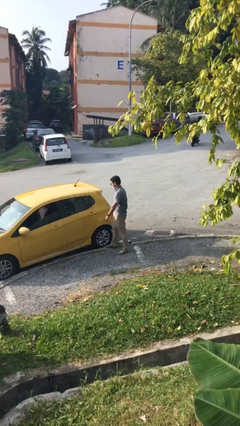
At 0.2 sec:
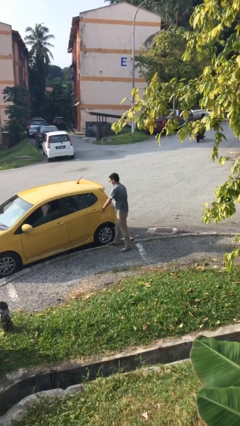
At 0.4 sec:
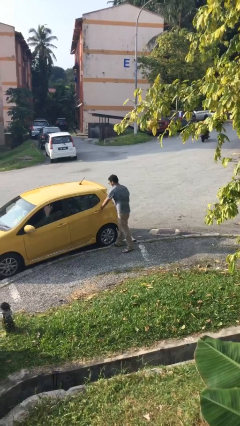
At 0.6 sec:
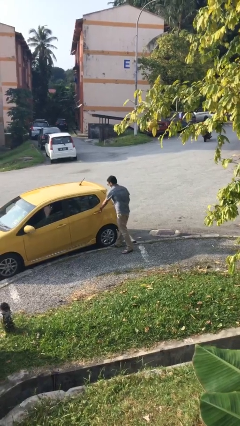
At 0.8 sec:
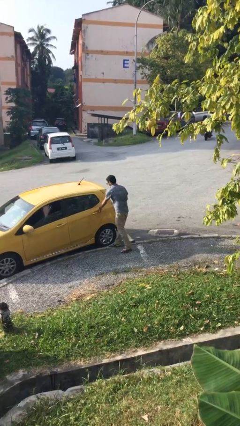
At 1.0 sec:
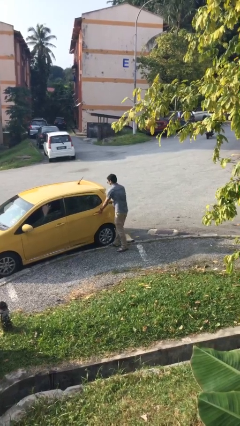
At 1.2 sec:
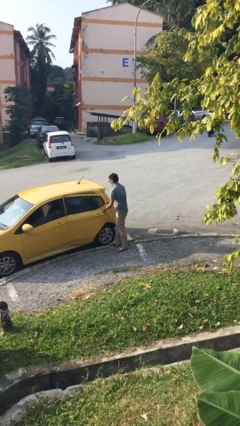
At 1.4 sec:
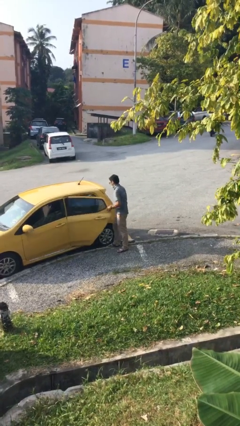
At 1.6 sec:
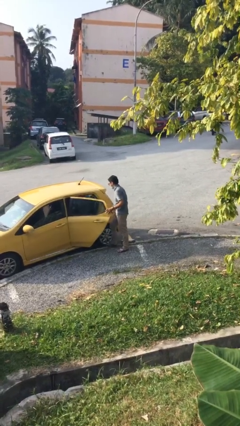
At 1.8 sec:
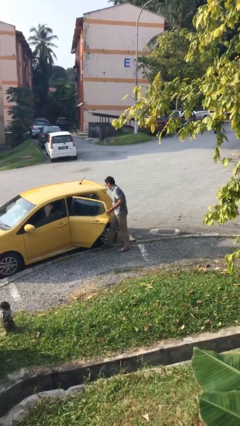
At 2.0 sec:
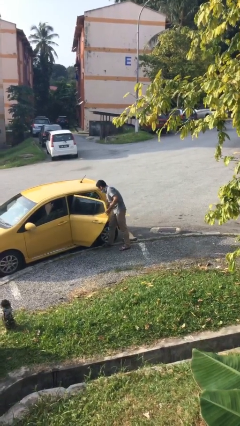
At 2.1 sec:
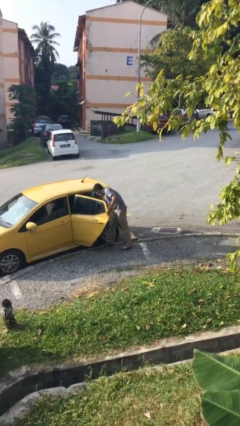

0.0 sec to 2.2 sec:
person opens car door

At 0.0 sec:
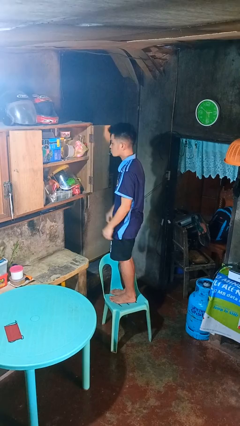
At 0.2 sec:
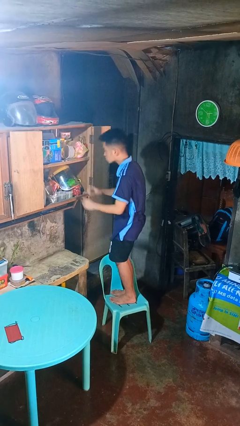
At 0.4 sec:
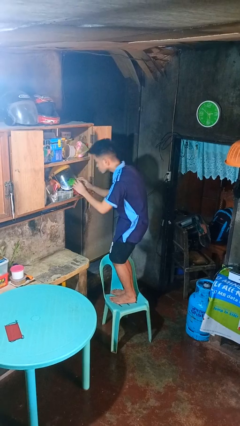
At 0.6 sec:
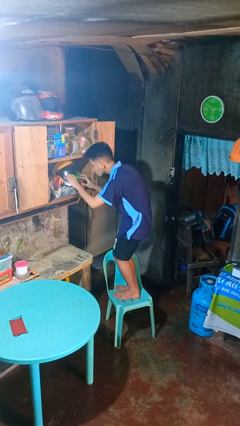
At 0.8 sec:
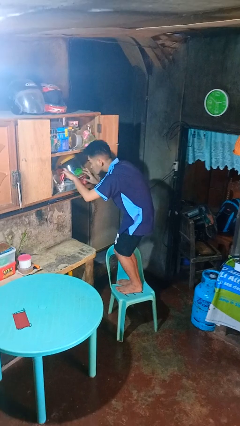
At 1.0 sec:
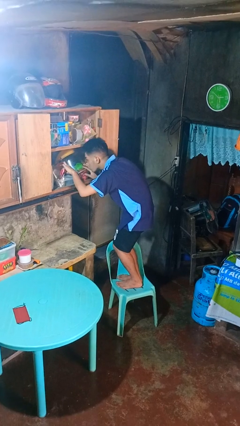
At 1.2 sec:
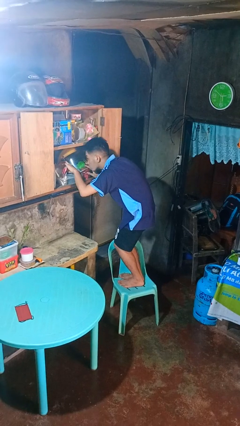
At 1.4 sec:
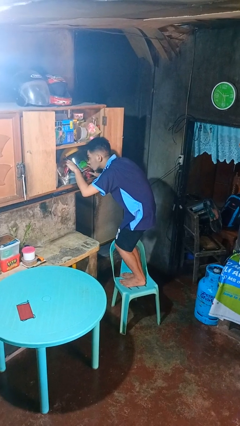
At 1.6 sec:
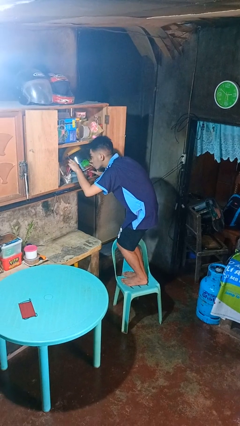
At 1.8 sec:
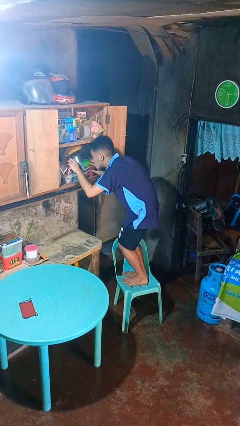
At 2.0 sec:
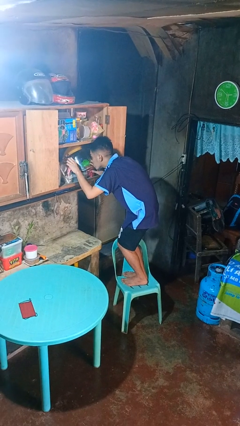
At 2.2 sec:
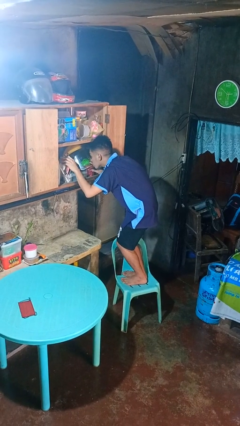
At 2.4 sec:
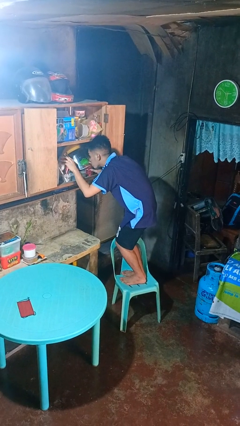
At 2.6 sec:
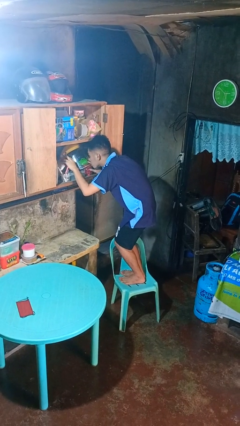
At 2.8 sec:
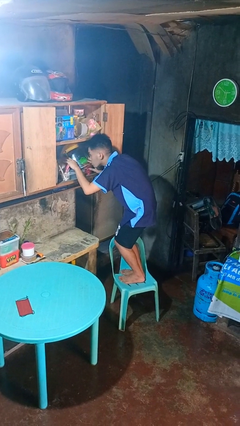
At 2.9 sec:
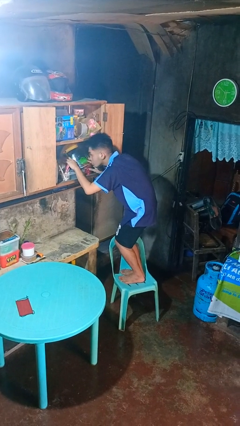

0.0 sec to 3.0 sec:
person searches in cabinet

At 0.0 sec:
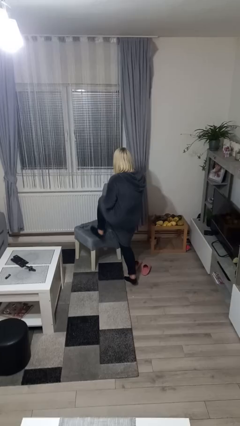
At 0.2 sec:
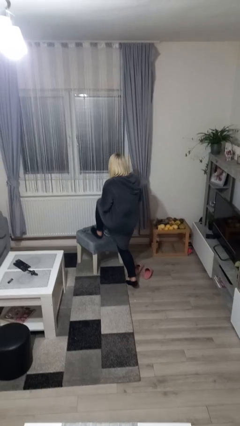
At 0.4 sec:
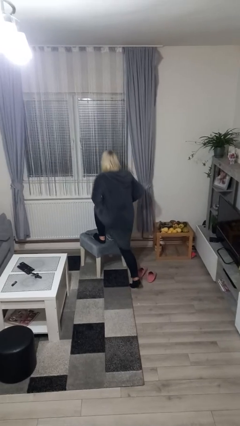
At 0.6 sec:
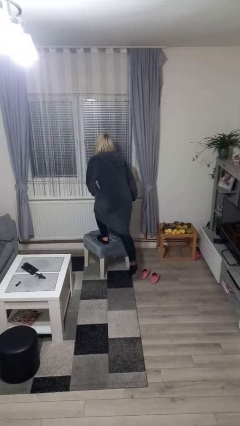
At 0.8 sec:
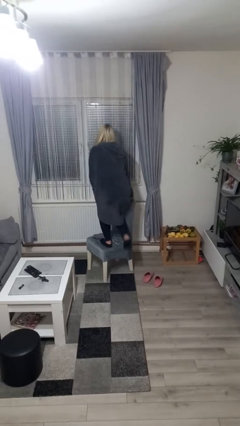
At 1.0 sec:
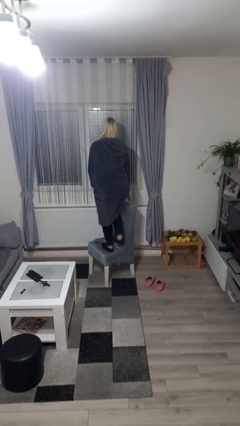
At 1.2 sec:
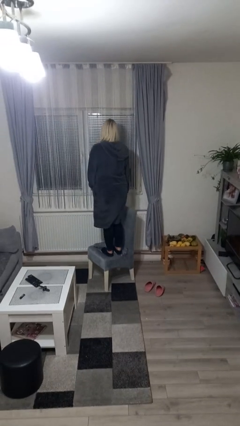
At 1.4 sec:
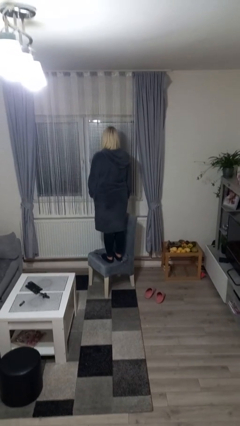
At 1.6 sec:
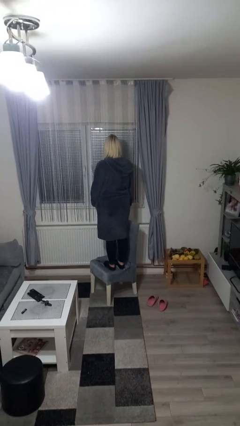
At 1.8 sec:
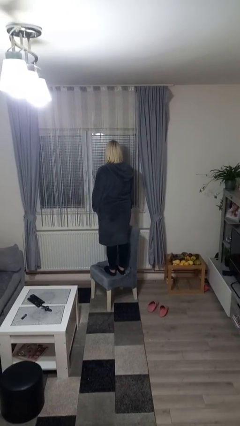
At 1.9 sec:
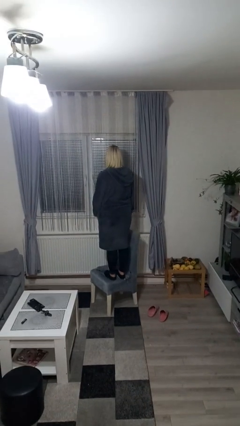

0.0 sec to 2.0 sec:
person climbs on chair

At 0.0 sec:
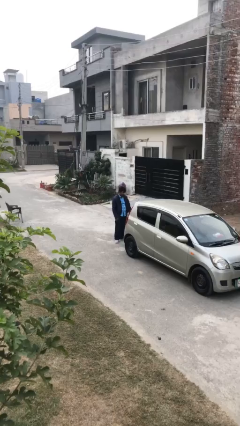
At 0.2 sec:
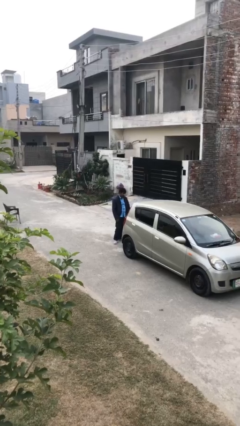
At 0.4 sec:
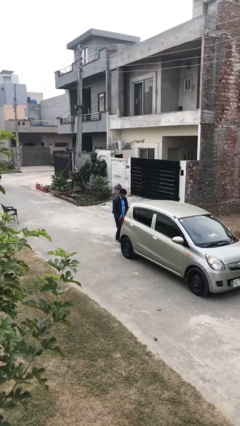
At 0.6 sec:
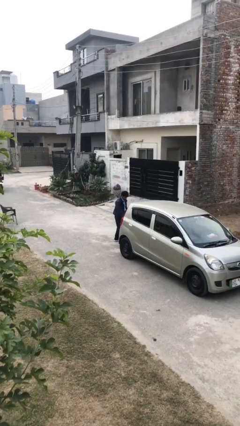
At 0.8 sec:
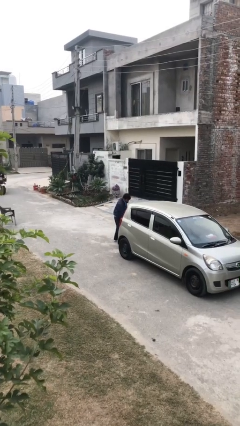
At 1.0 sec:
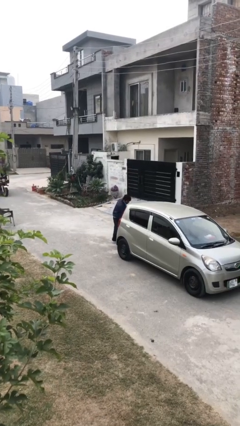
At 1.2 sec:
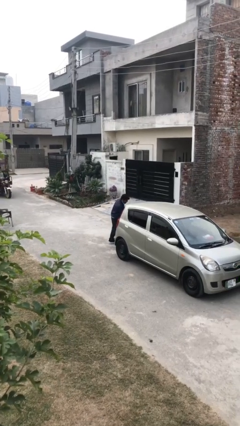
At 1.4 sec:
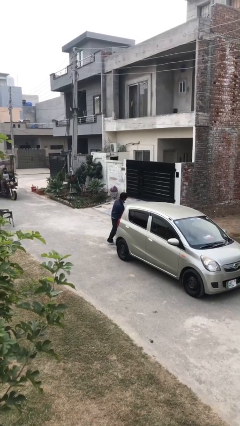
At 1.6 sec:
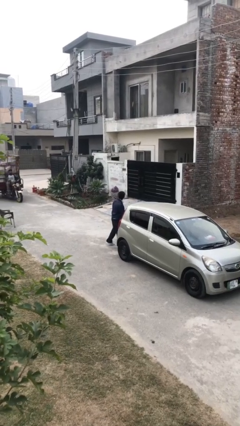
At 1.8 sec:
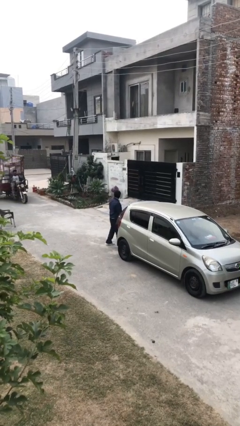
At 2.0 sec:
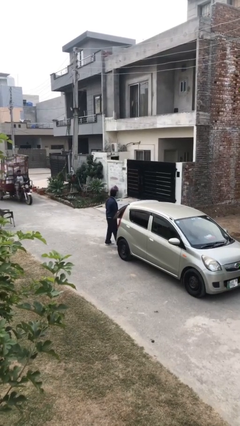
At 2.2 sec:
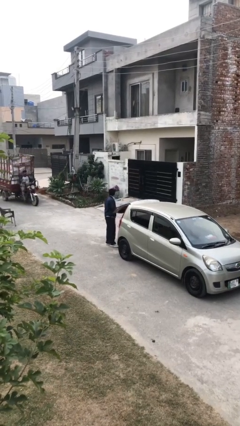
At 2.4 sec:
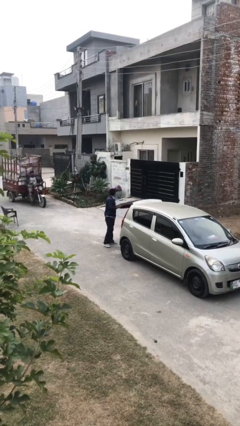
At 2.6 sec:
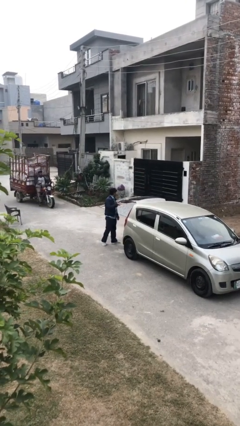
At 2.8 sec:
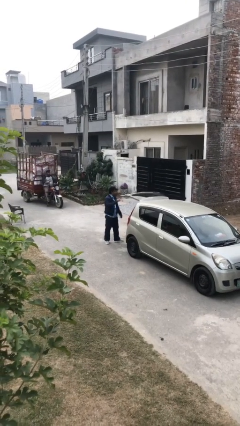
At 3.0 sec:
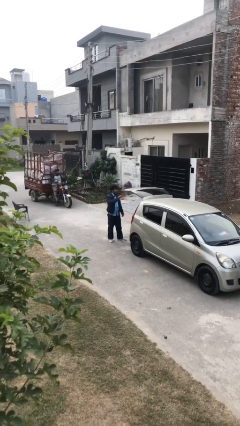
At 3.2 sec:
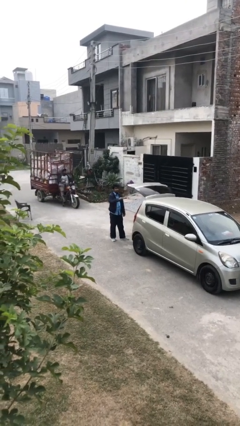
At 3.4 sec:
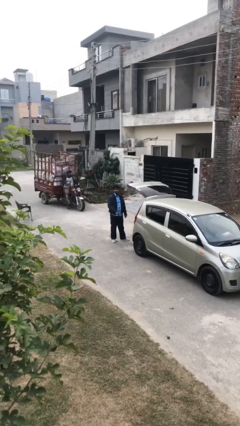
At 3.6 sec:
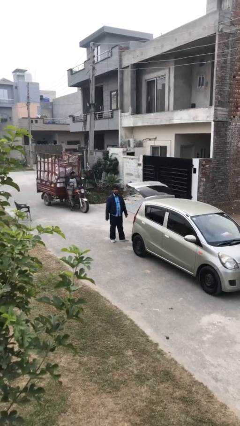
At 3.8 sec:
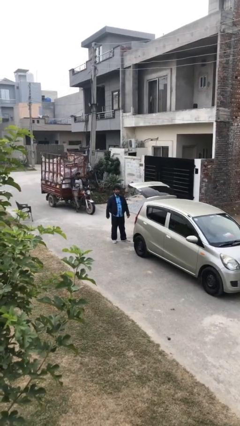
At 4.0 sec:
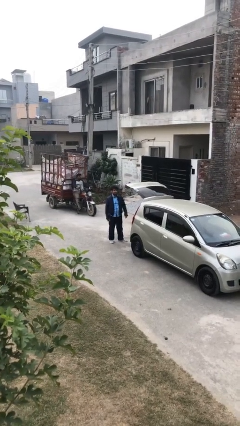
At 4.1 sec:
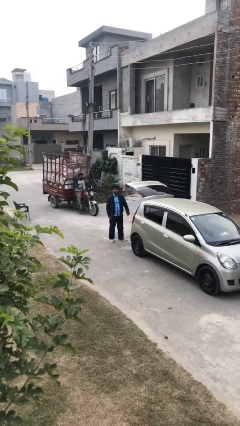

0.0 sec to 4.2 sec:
person opens car trunk

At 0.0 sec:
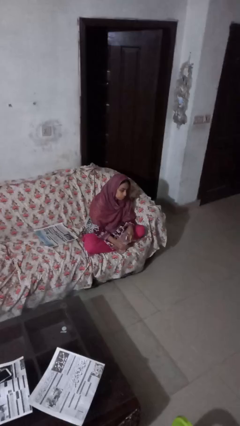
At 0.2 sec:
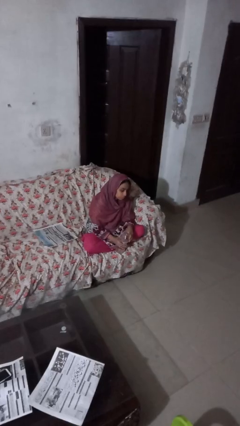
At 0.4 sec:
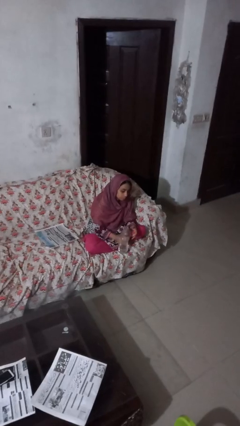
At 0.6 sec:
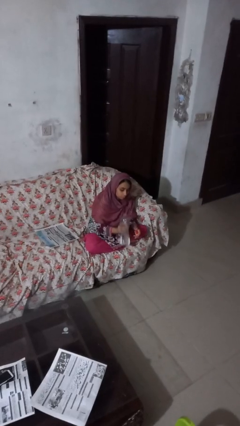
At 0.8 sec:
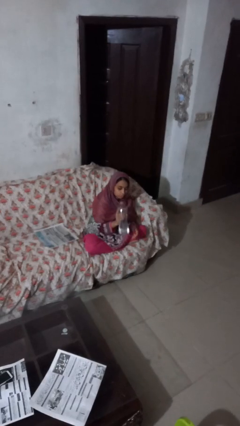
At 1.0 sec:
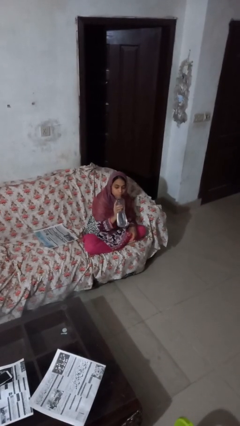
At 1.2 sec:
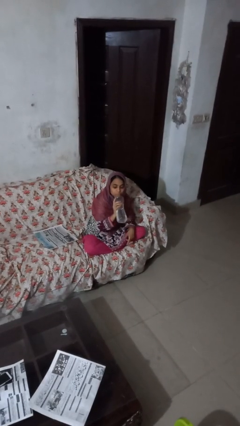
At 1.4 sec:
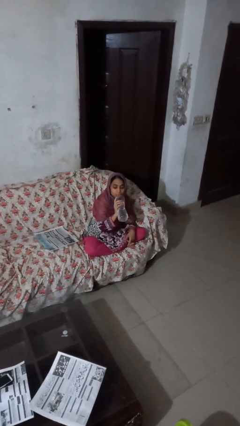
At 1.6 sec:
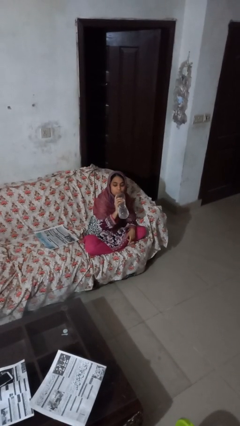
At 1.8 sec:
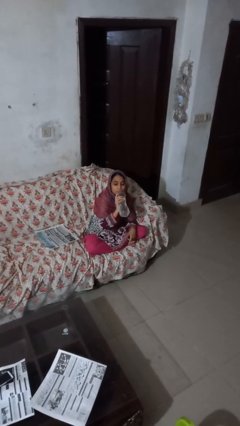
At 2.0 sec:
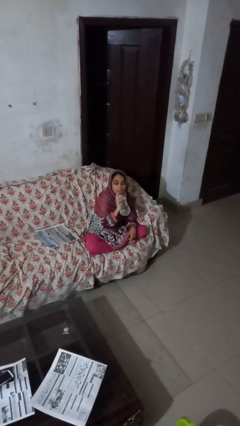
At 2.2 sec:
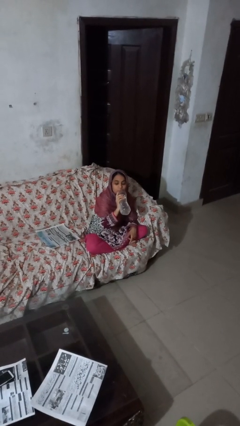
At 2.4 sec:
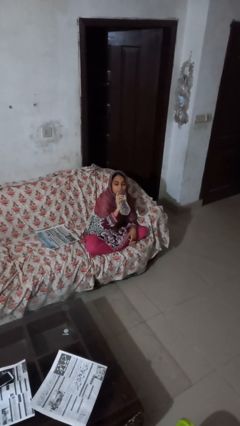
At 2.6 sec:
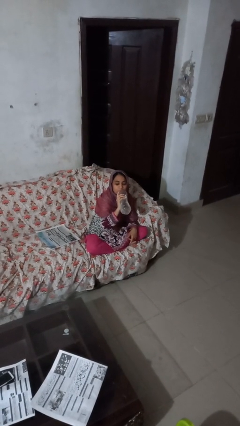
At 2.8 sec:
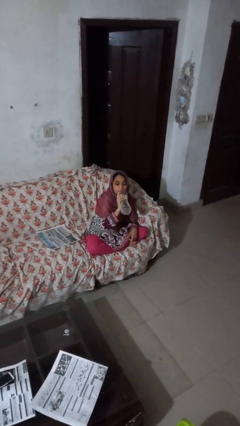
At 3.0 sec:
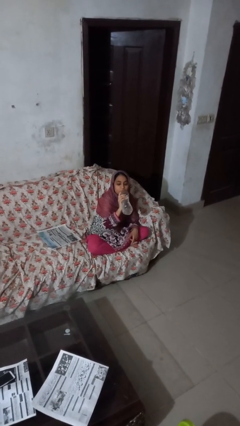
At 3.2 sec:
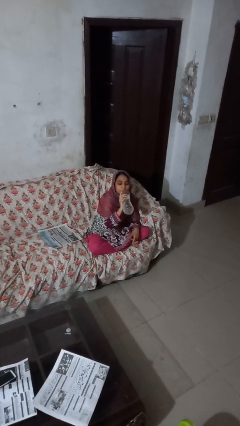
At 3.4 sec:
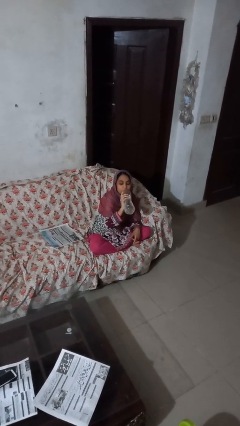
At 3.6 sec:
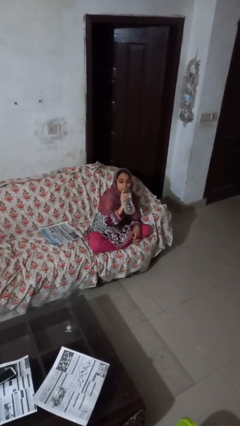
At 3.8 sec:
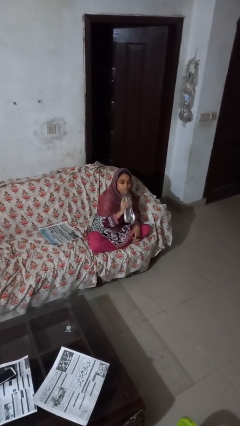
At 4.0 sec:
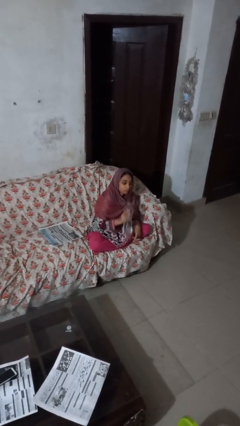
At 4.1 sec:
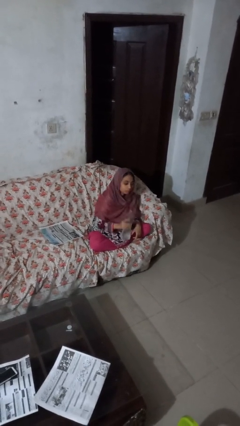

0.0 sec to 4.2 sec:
person drinks from bottle

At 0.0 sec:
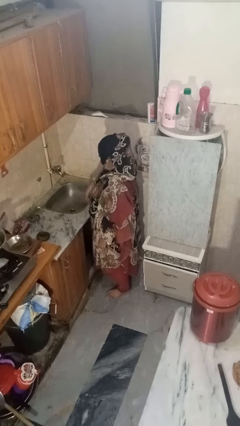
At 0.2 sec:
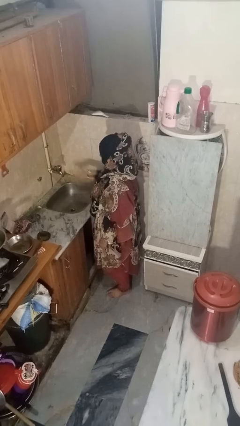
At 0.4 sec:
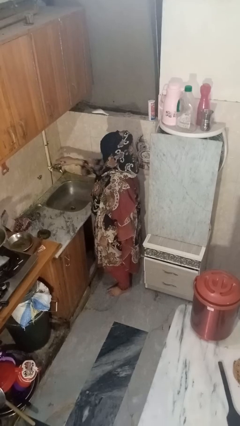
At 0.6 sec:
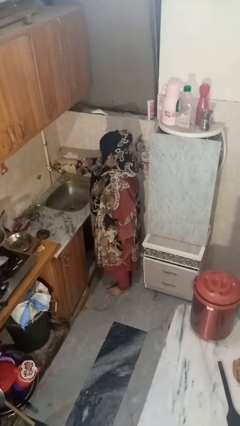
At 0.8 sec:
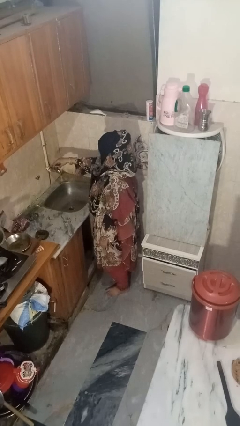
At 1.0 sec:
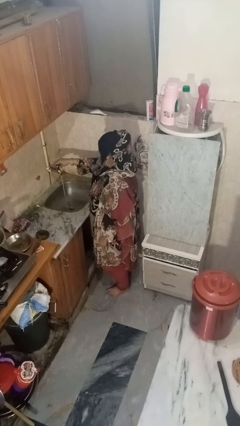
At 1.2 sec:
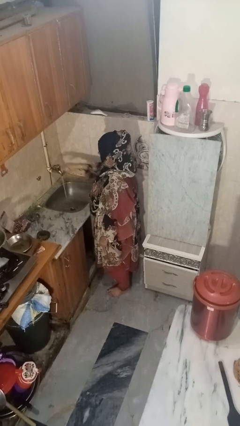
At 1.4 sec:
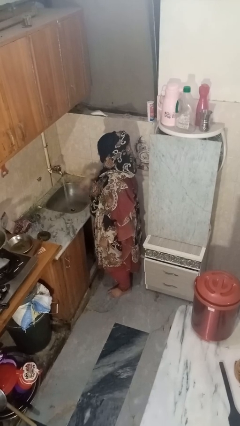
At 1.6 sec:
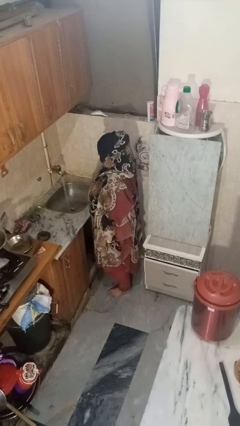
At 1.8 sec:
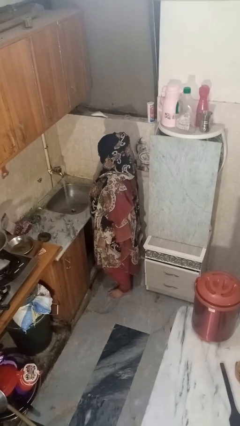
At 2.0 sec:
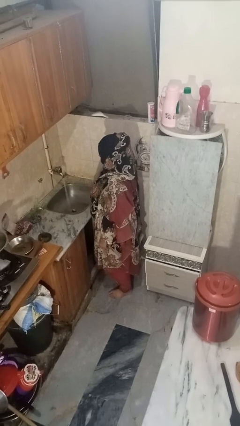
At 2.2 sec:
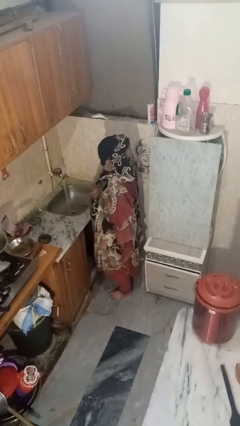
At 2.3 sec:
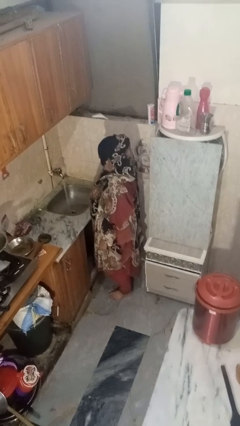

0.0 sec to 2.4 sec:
person turns on faucet
